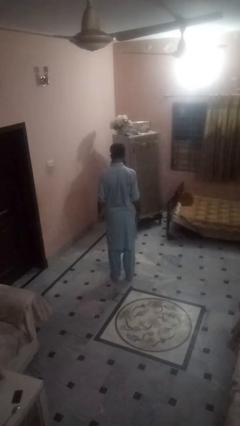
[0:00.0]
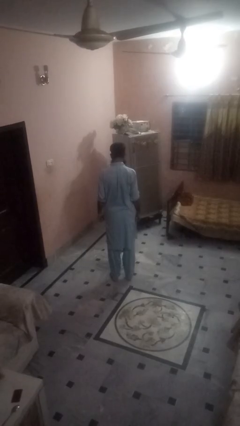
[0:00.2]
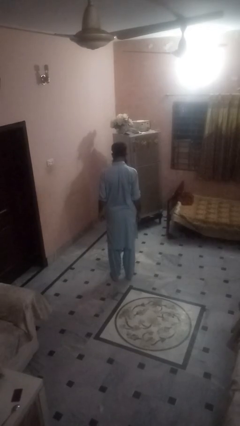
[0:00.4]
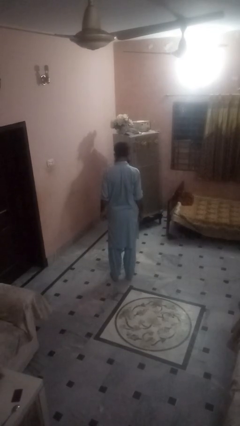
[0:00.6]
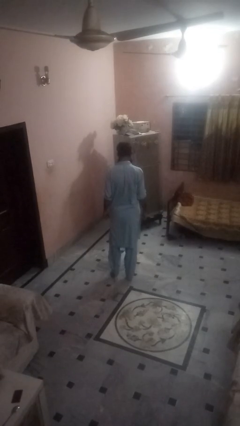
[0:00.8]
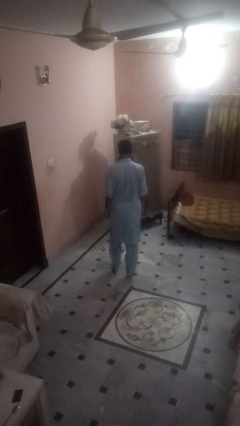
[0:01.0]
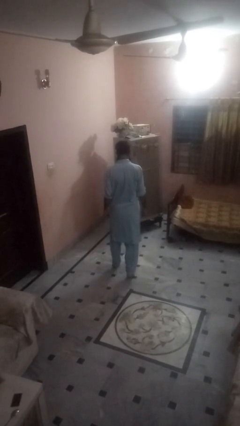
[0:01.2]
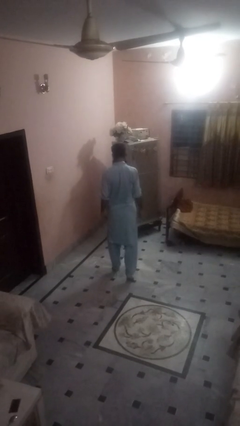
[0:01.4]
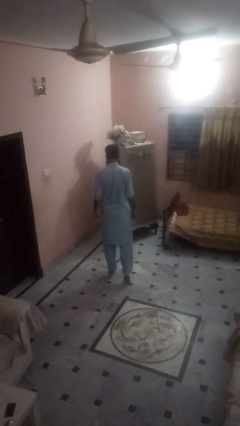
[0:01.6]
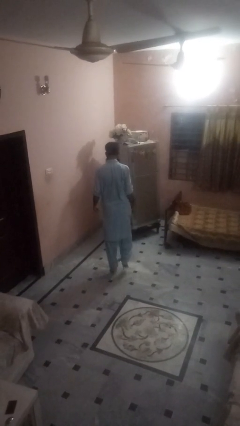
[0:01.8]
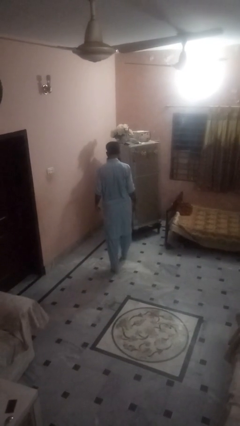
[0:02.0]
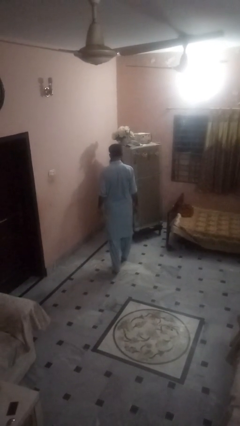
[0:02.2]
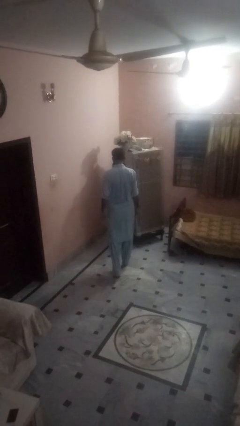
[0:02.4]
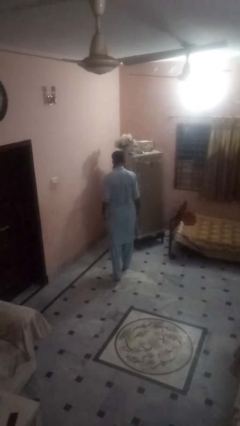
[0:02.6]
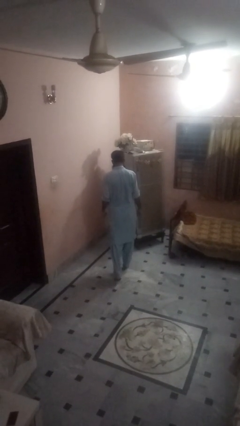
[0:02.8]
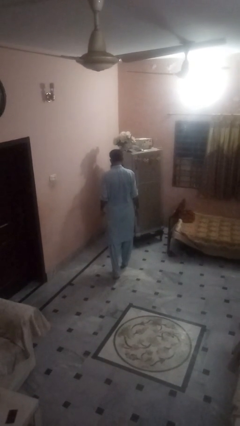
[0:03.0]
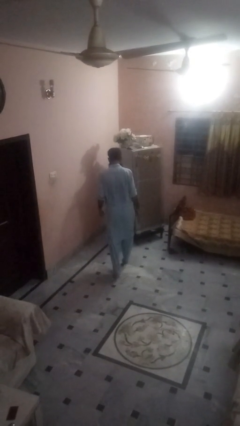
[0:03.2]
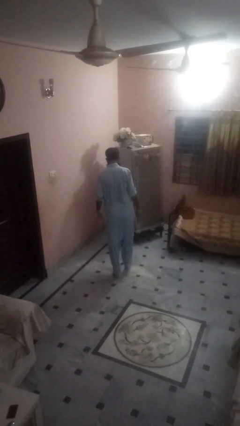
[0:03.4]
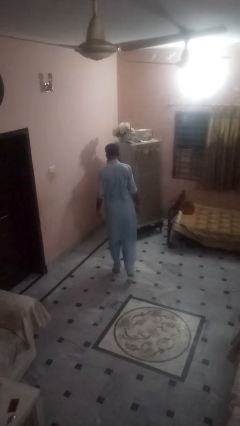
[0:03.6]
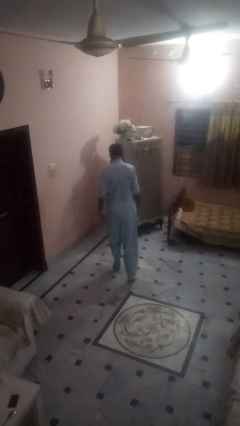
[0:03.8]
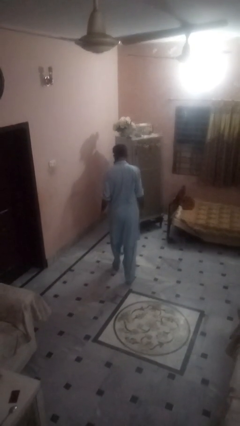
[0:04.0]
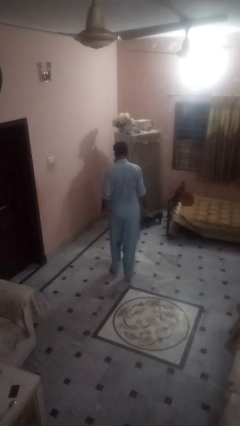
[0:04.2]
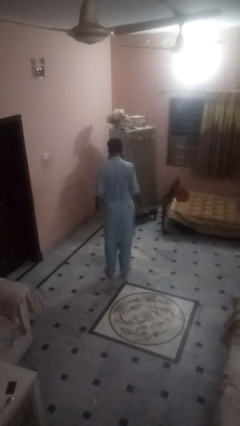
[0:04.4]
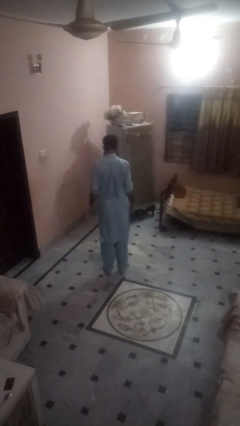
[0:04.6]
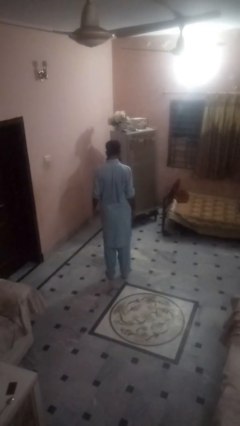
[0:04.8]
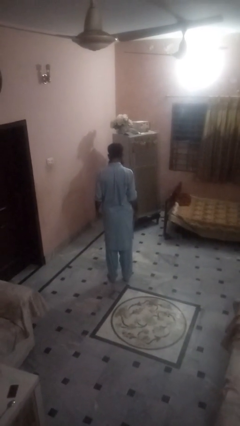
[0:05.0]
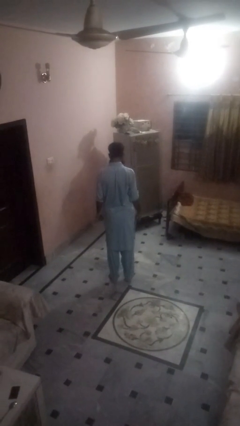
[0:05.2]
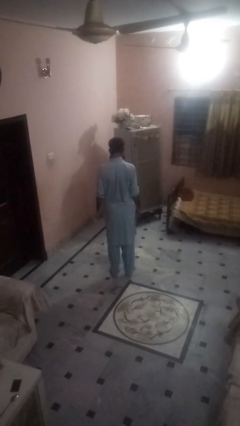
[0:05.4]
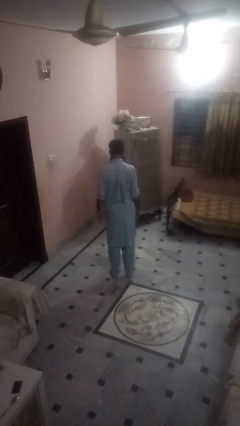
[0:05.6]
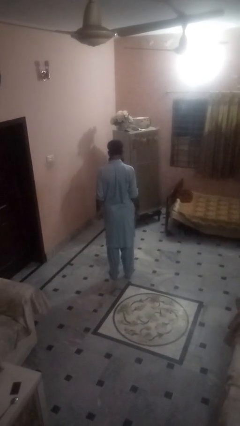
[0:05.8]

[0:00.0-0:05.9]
person walks tiptoe

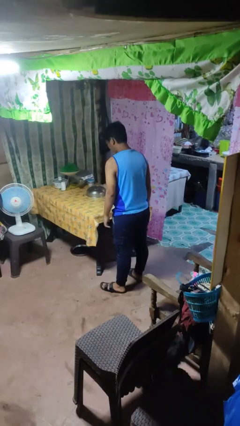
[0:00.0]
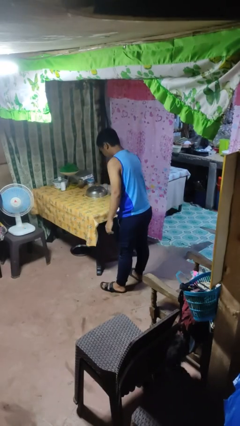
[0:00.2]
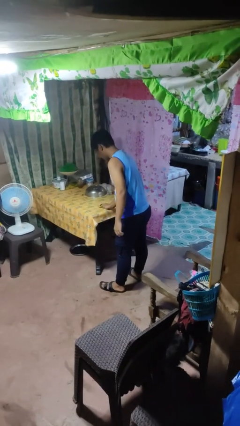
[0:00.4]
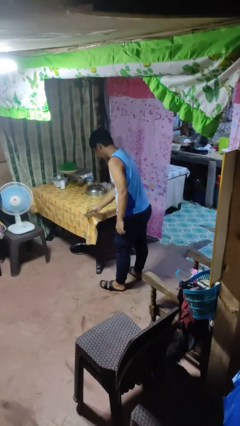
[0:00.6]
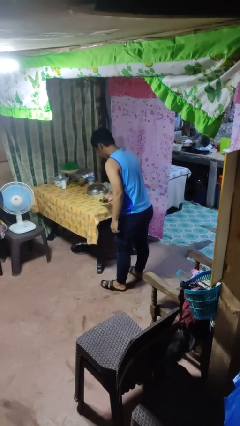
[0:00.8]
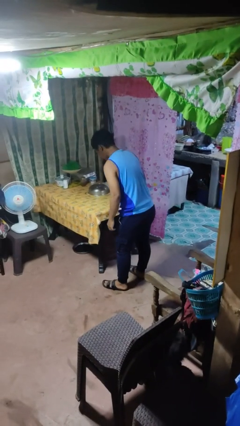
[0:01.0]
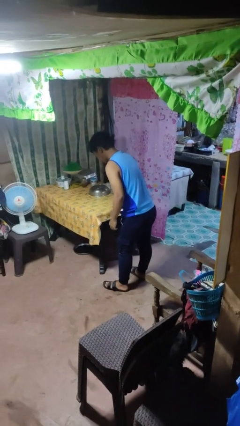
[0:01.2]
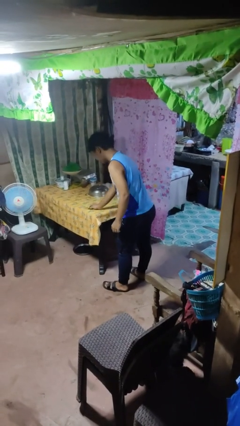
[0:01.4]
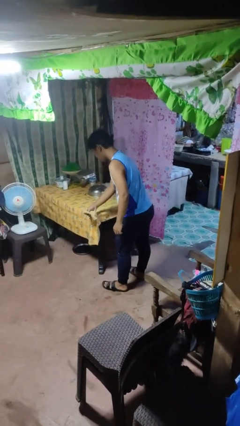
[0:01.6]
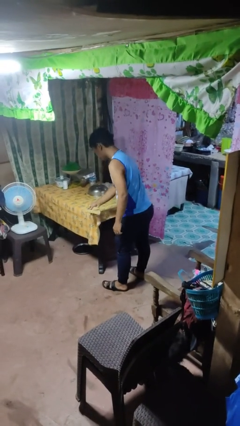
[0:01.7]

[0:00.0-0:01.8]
person cleans table with rag

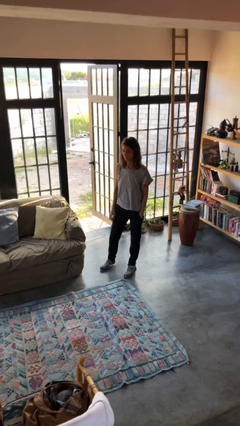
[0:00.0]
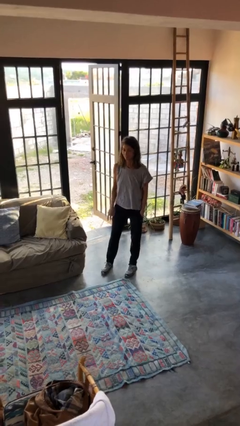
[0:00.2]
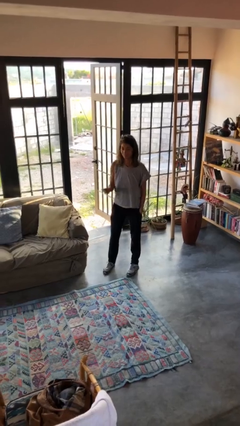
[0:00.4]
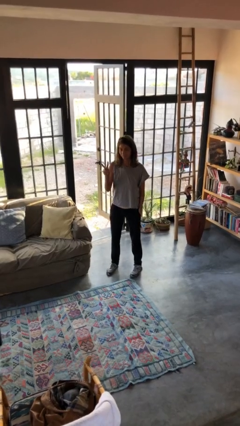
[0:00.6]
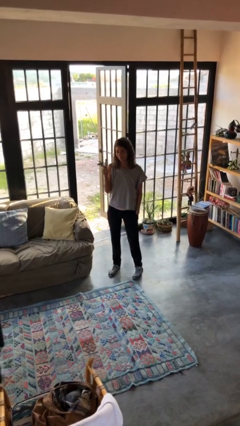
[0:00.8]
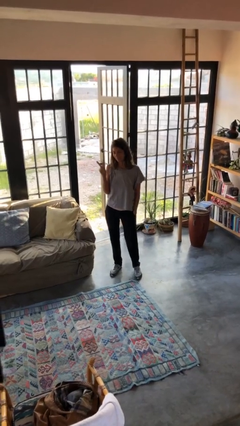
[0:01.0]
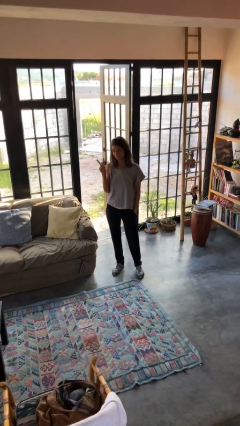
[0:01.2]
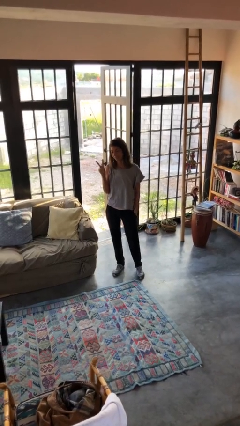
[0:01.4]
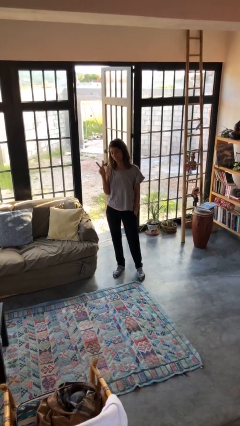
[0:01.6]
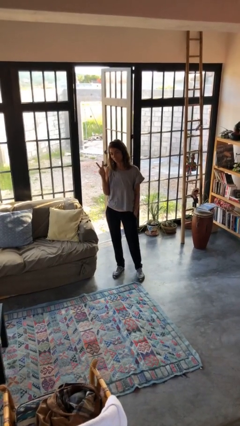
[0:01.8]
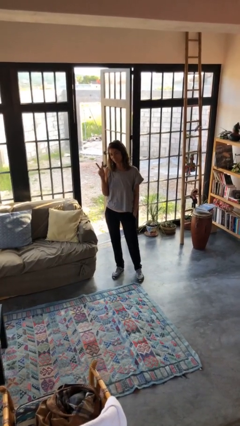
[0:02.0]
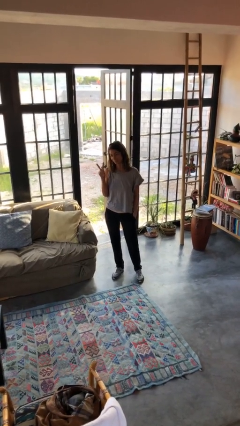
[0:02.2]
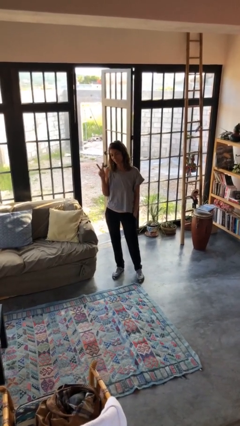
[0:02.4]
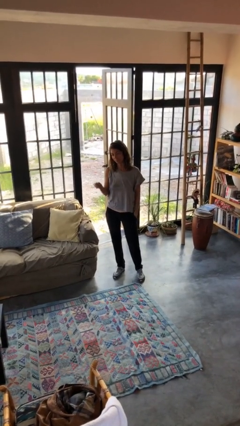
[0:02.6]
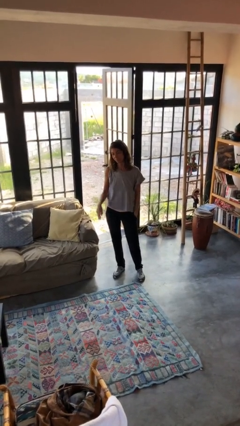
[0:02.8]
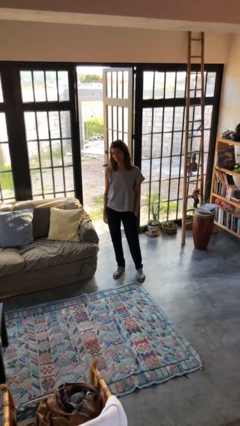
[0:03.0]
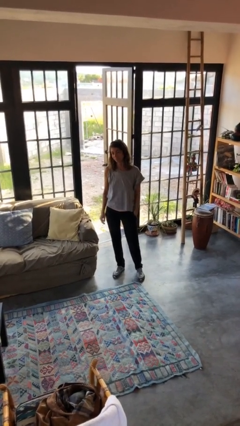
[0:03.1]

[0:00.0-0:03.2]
person gestures peace

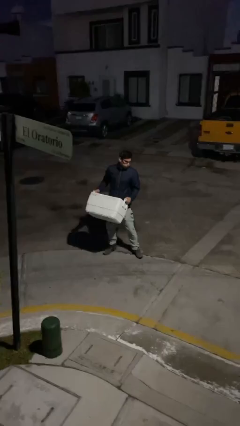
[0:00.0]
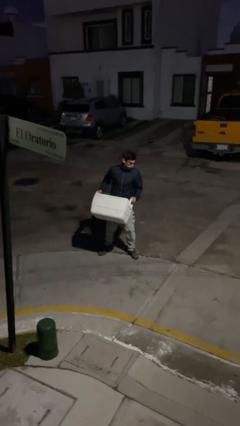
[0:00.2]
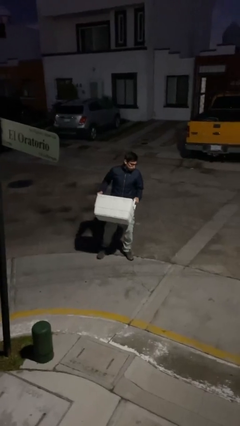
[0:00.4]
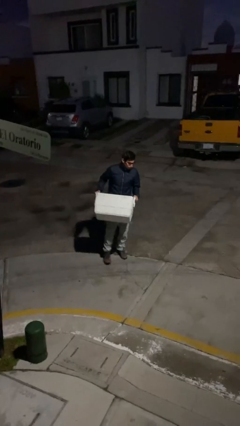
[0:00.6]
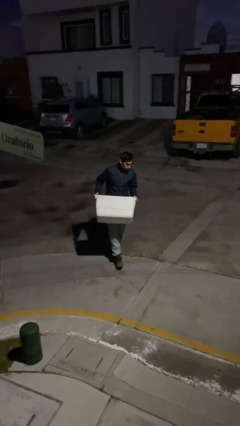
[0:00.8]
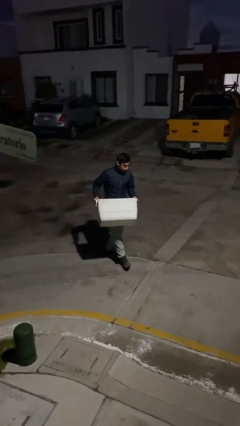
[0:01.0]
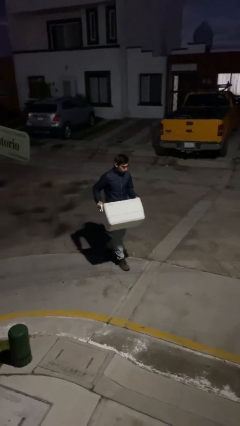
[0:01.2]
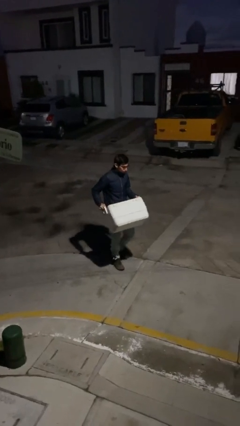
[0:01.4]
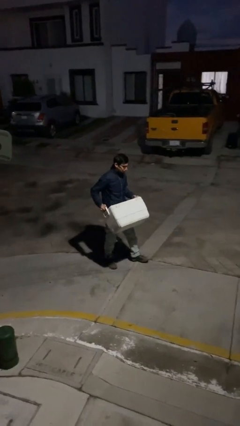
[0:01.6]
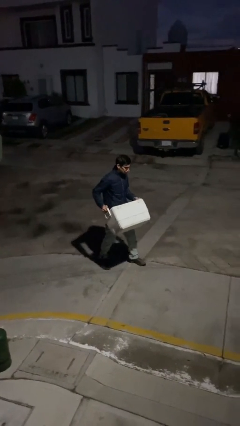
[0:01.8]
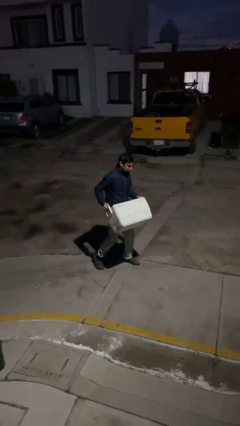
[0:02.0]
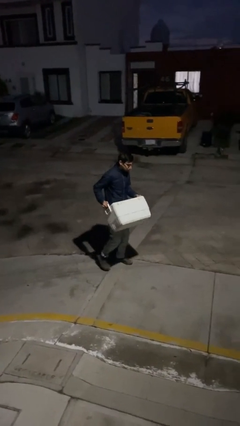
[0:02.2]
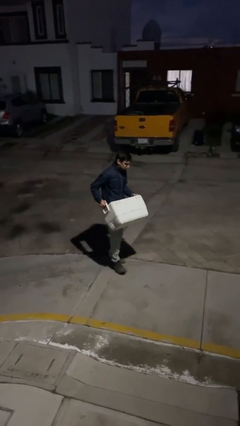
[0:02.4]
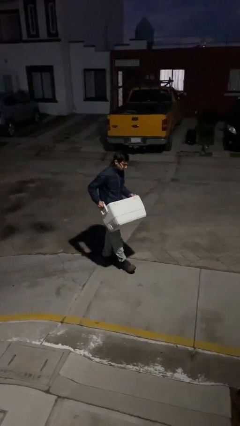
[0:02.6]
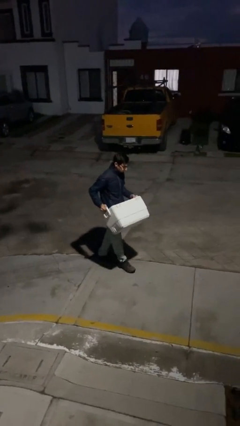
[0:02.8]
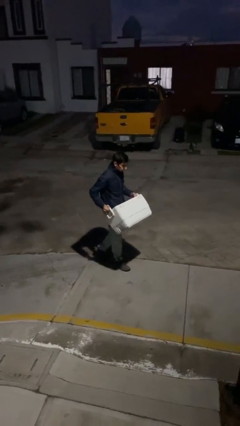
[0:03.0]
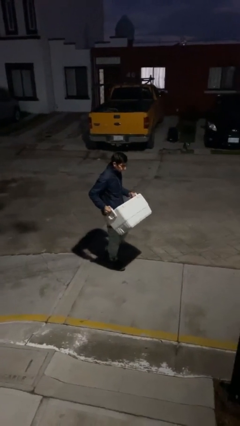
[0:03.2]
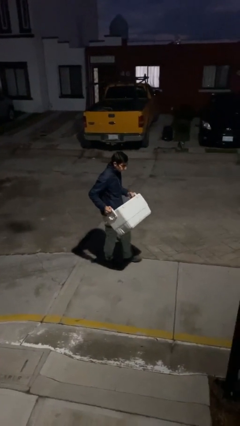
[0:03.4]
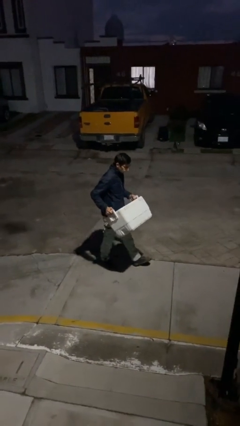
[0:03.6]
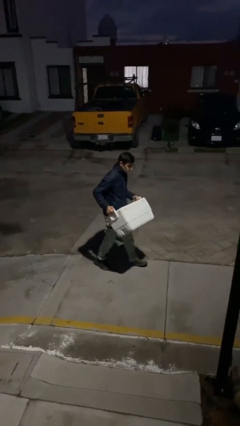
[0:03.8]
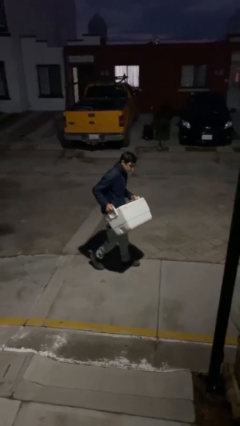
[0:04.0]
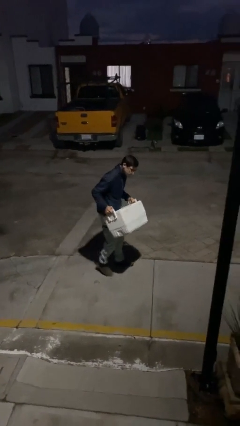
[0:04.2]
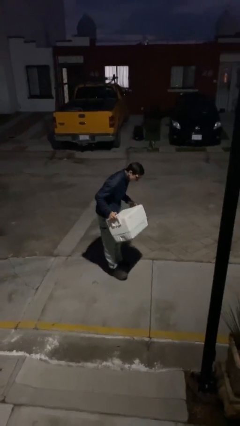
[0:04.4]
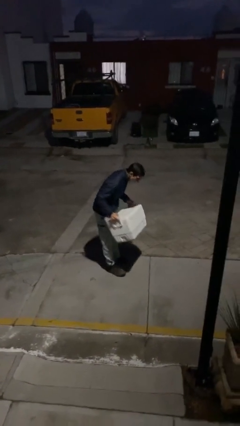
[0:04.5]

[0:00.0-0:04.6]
person carries heavy object

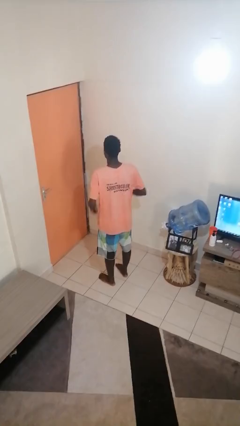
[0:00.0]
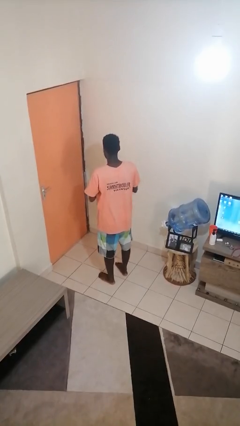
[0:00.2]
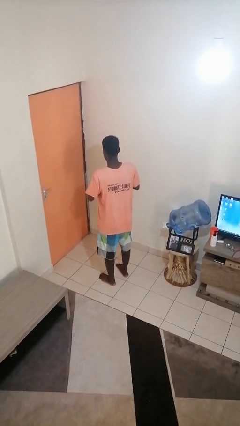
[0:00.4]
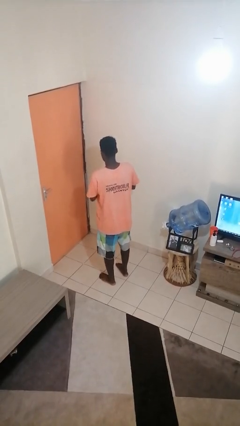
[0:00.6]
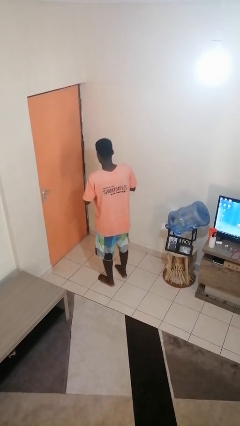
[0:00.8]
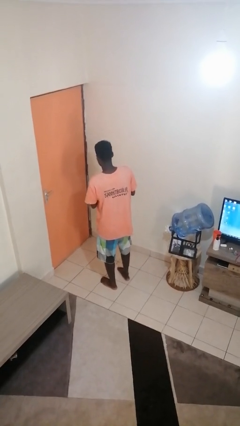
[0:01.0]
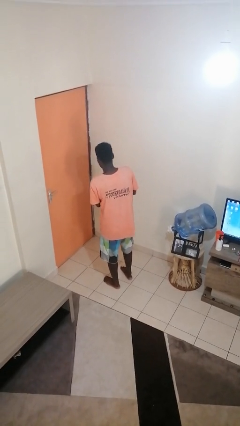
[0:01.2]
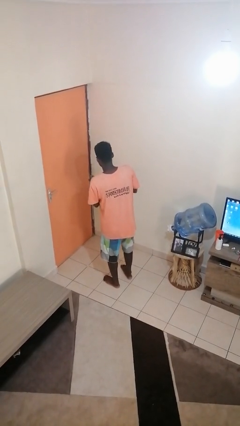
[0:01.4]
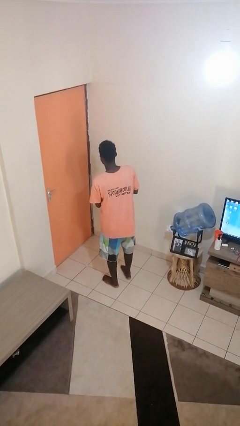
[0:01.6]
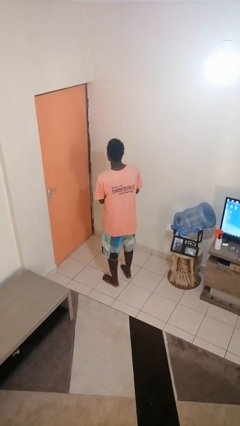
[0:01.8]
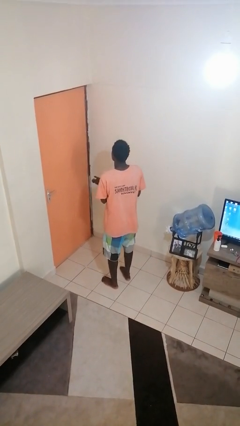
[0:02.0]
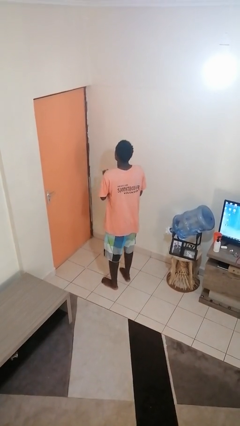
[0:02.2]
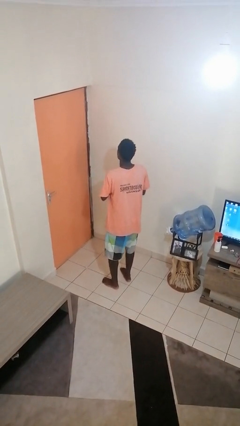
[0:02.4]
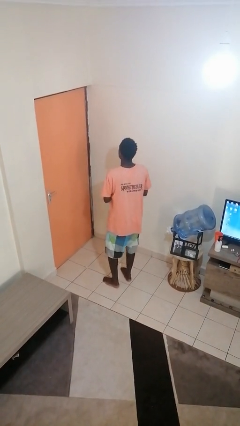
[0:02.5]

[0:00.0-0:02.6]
person claps hands
